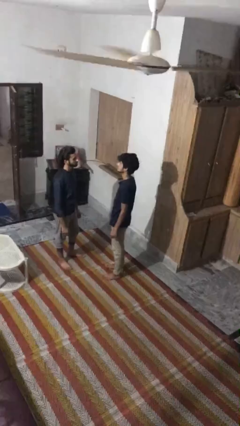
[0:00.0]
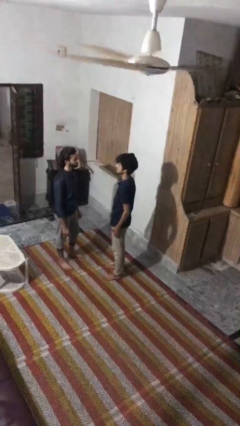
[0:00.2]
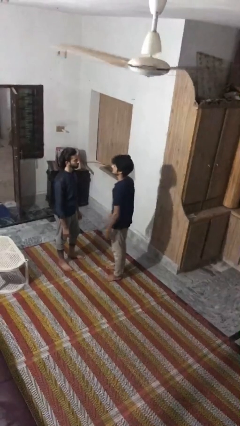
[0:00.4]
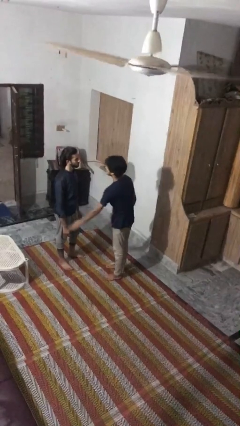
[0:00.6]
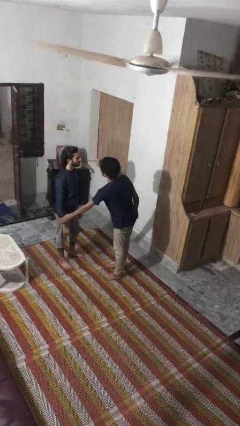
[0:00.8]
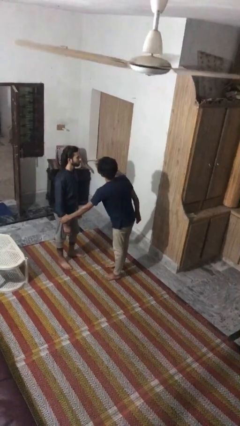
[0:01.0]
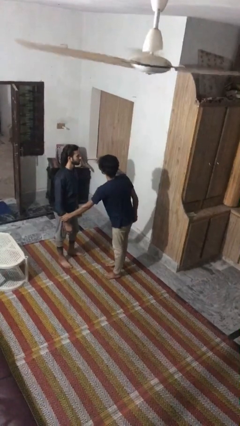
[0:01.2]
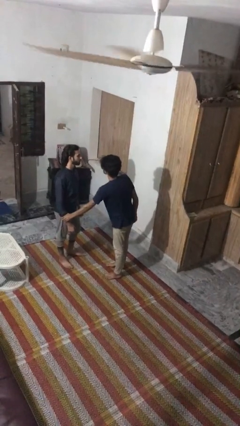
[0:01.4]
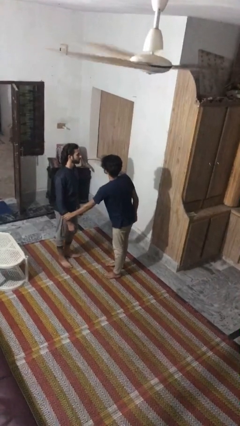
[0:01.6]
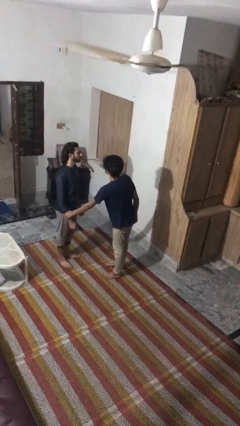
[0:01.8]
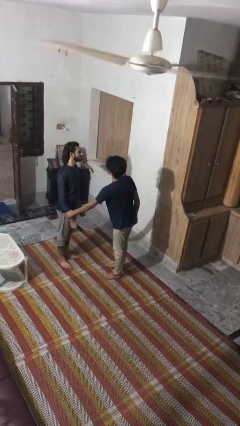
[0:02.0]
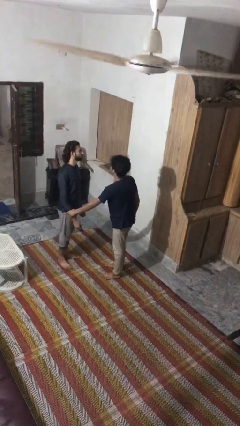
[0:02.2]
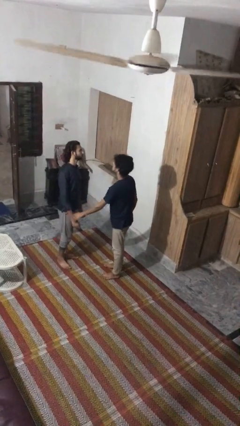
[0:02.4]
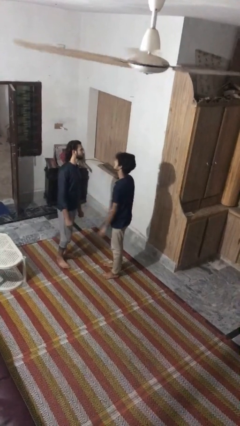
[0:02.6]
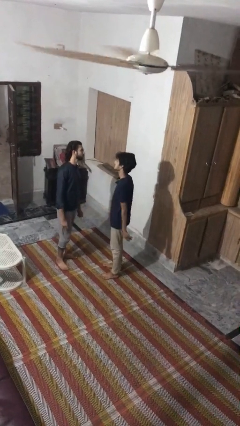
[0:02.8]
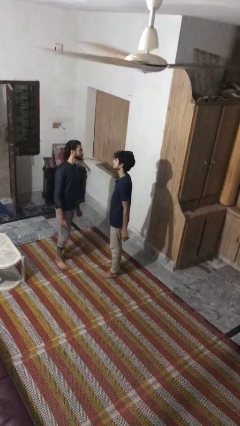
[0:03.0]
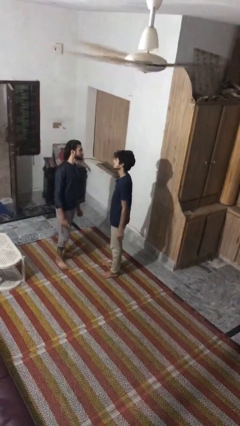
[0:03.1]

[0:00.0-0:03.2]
person grabs person by forearm

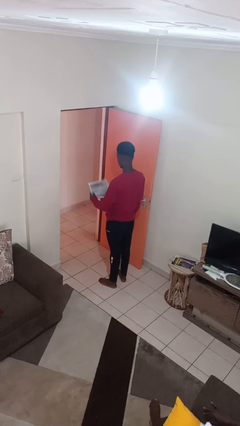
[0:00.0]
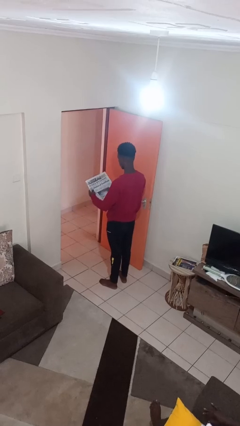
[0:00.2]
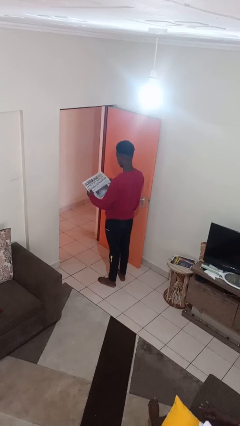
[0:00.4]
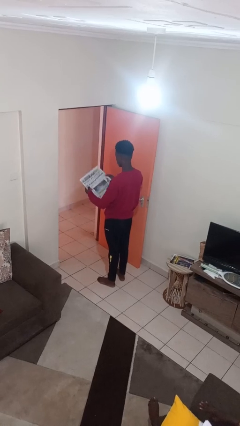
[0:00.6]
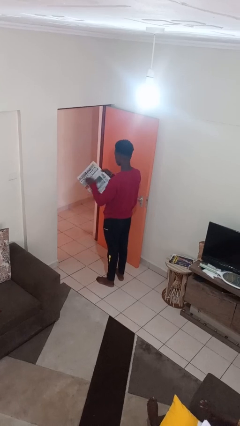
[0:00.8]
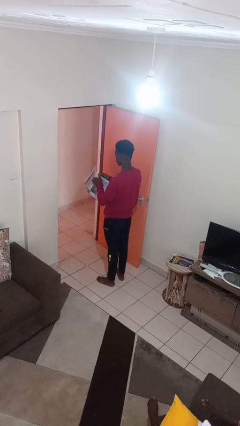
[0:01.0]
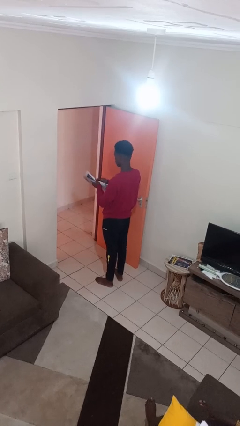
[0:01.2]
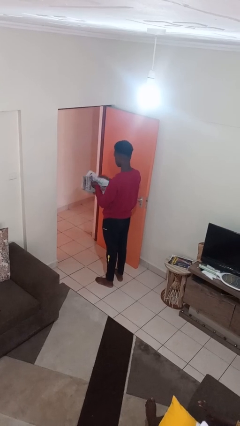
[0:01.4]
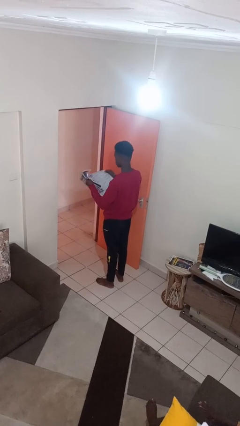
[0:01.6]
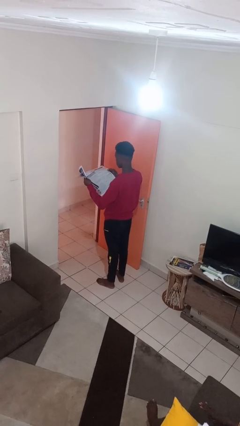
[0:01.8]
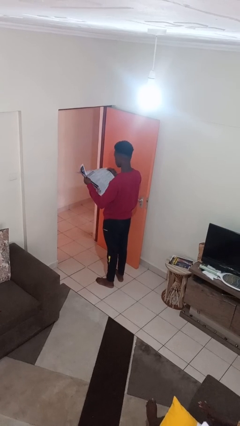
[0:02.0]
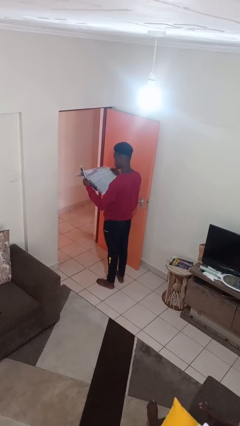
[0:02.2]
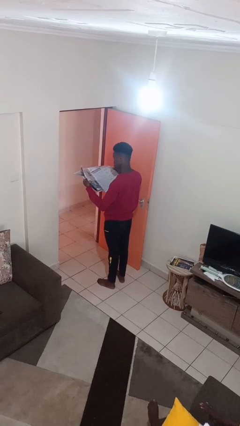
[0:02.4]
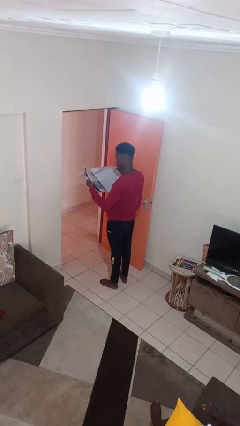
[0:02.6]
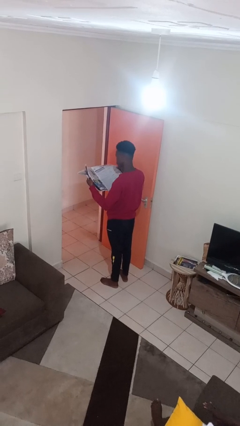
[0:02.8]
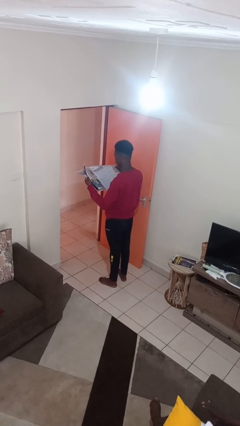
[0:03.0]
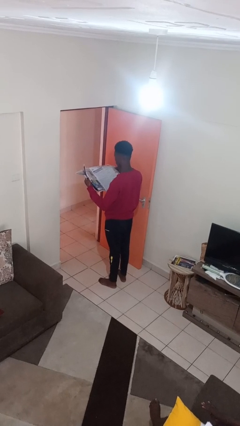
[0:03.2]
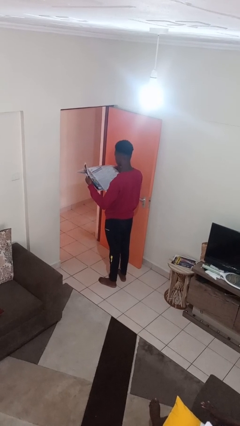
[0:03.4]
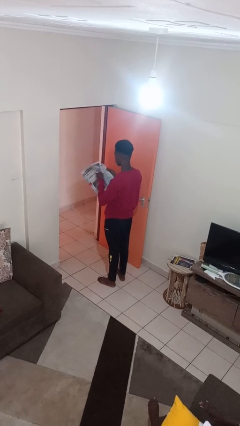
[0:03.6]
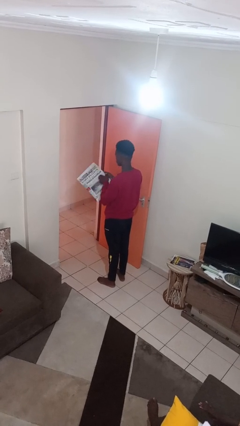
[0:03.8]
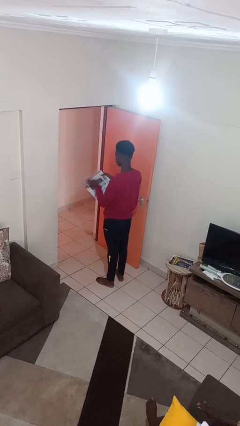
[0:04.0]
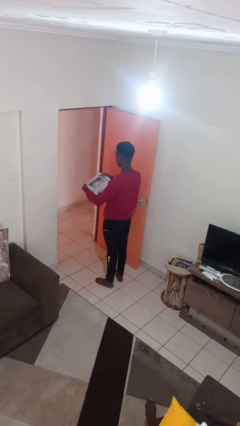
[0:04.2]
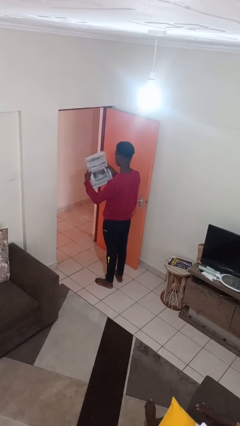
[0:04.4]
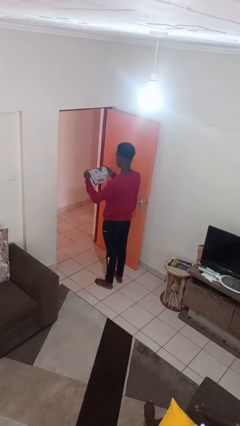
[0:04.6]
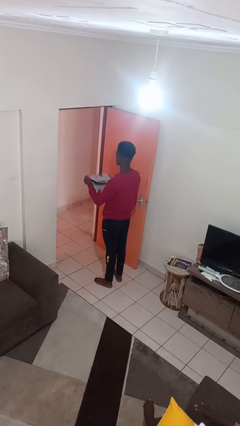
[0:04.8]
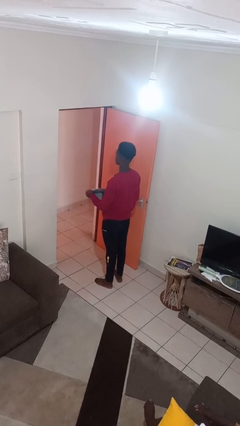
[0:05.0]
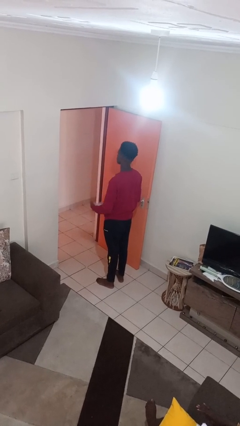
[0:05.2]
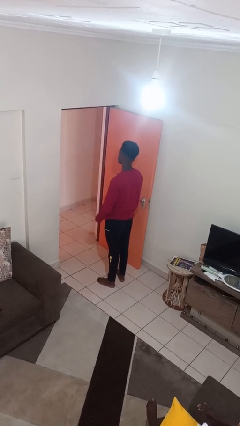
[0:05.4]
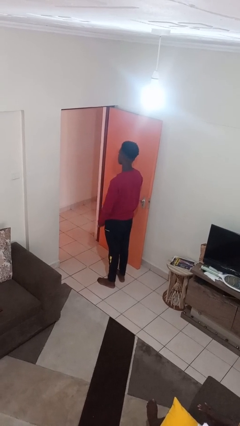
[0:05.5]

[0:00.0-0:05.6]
person reads newspaper

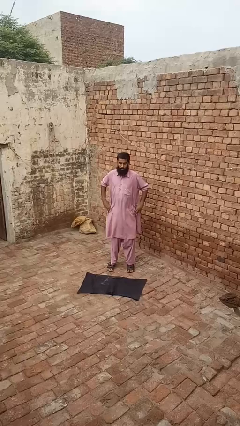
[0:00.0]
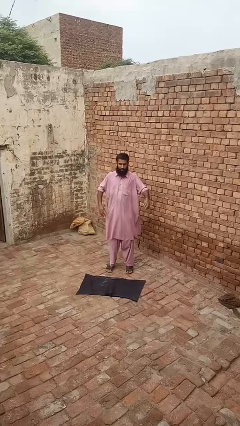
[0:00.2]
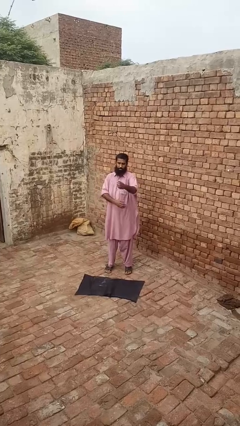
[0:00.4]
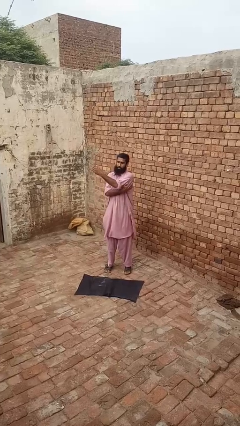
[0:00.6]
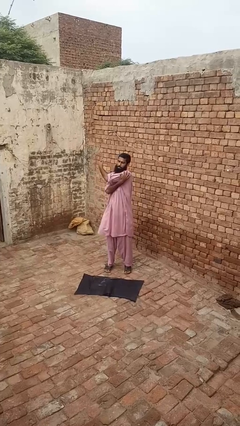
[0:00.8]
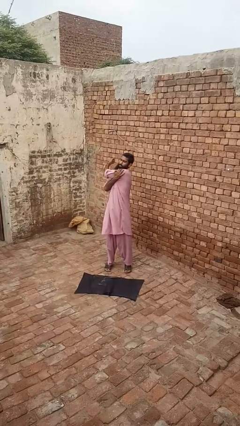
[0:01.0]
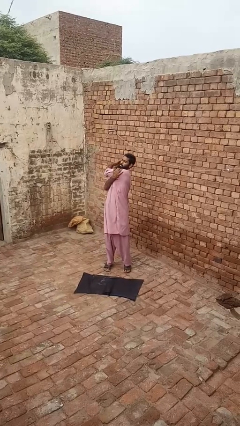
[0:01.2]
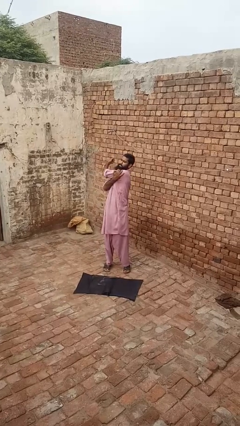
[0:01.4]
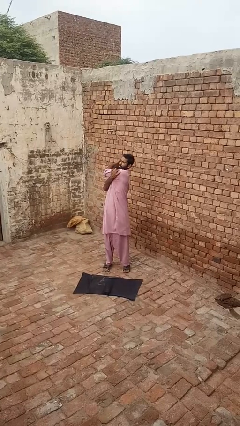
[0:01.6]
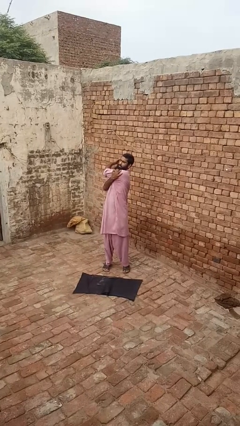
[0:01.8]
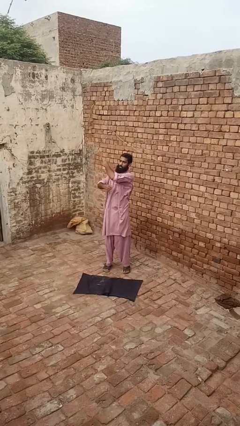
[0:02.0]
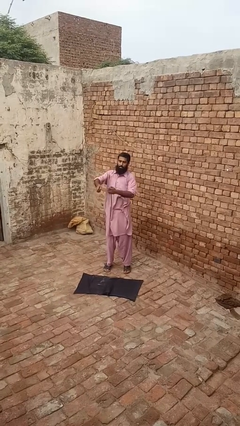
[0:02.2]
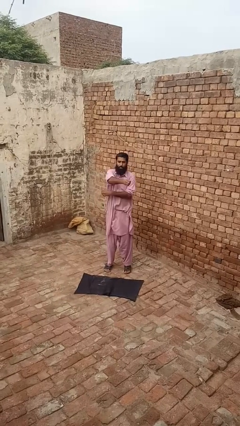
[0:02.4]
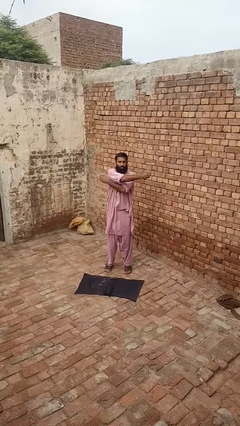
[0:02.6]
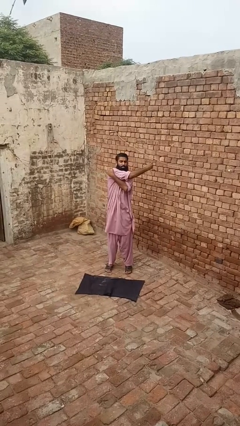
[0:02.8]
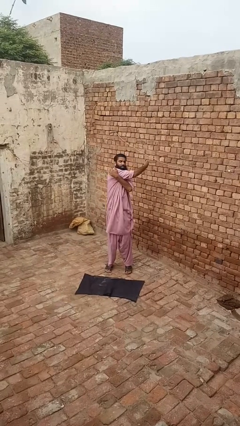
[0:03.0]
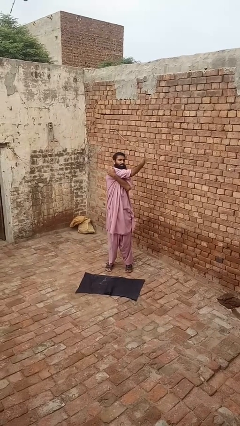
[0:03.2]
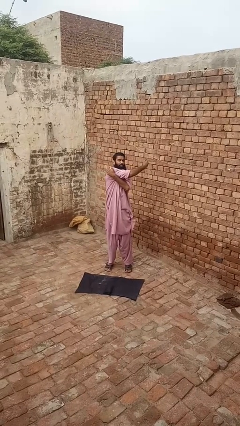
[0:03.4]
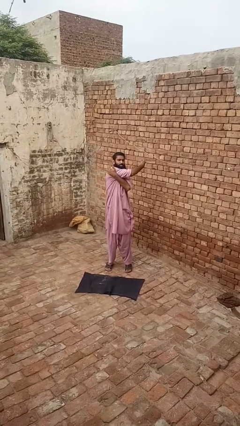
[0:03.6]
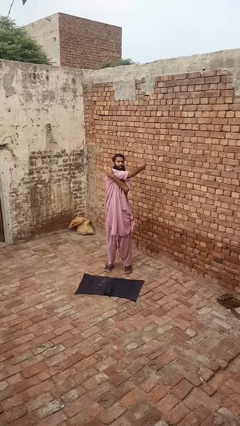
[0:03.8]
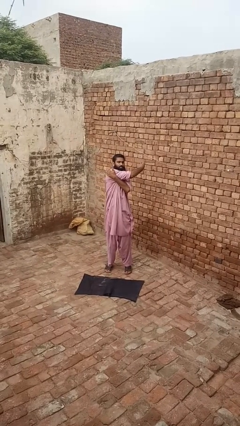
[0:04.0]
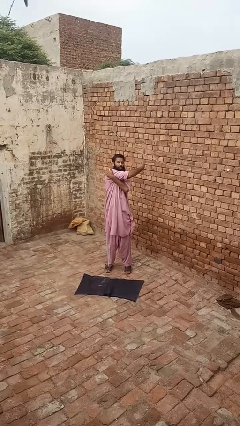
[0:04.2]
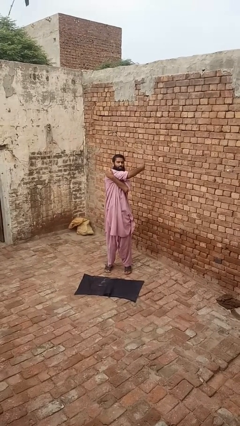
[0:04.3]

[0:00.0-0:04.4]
person stretches arms to side

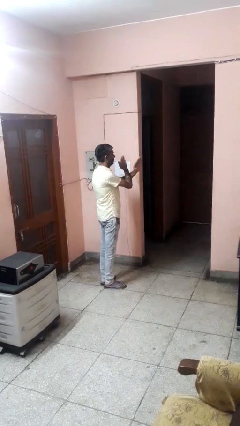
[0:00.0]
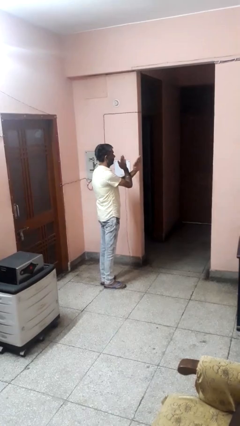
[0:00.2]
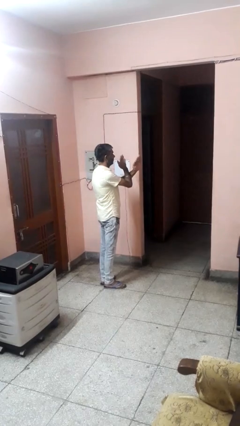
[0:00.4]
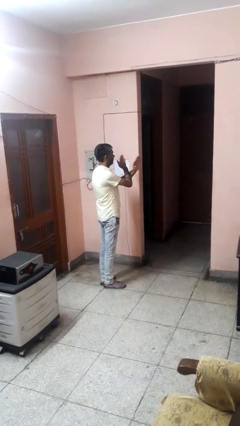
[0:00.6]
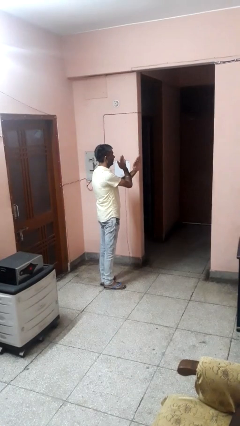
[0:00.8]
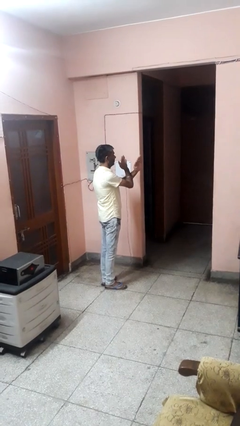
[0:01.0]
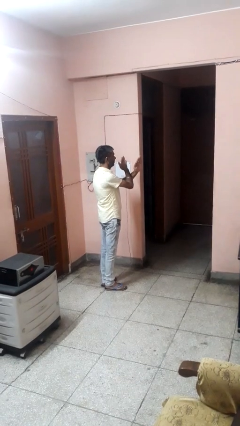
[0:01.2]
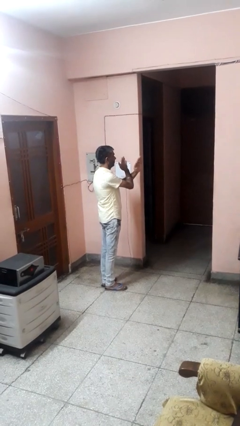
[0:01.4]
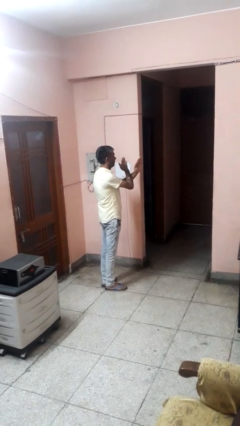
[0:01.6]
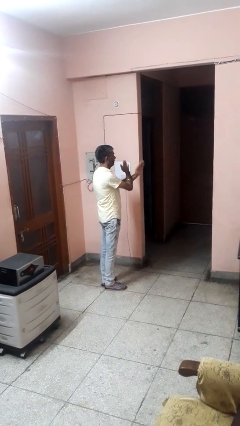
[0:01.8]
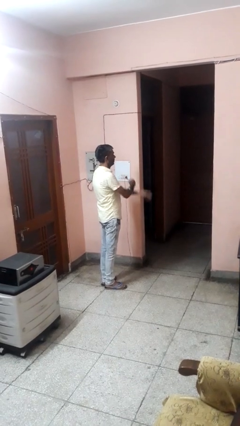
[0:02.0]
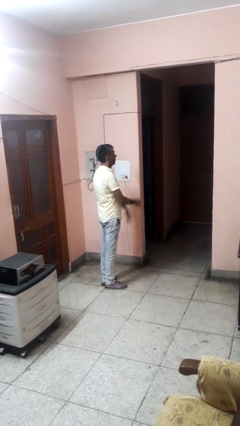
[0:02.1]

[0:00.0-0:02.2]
person gestures arms x

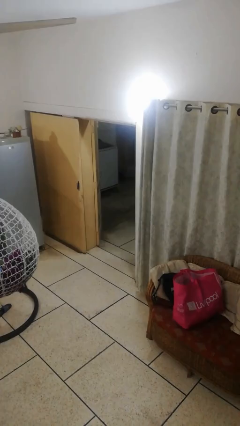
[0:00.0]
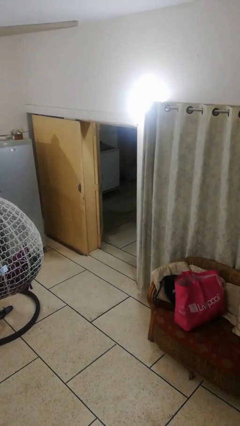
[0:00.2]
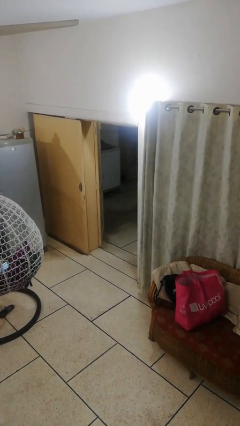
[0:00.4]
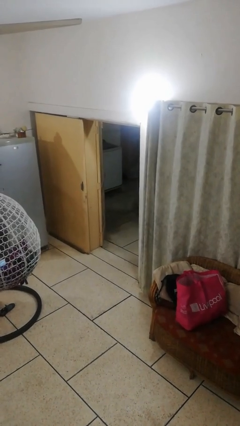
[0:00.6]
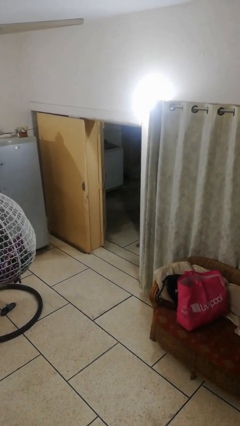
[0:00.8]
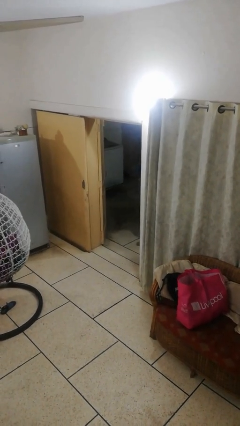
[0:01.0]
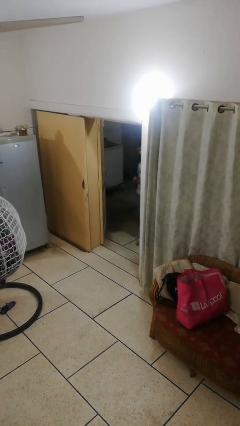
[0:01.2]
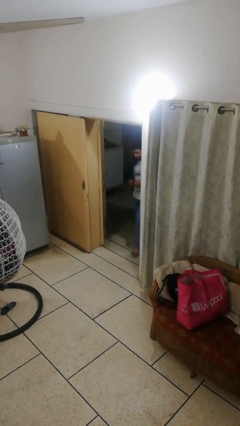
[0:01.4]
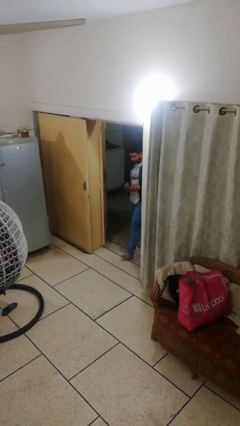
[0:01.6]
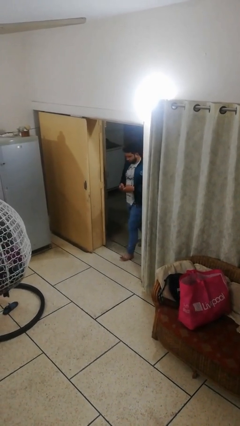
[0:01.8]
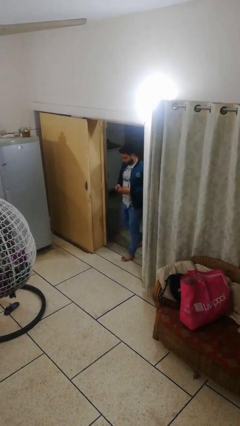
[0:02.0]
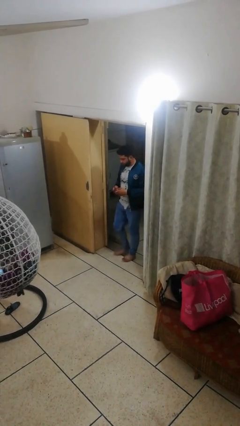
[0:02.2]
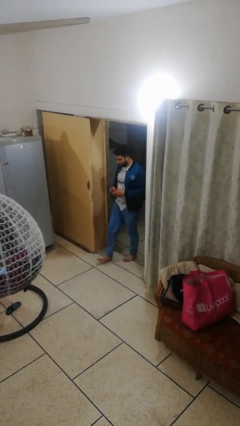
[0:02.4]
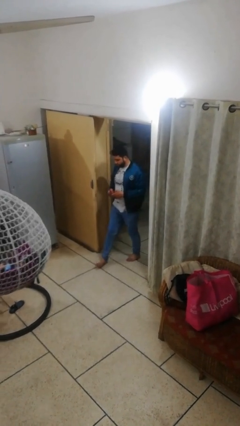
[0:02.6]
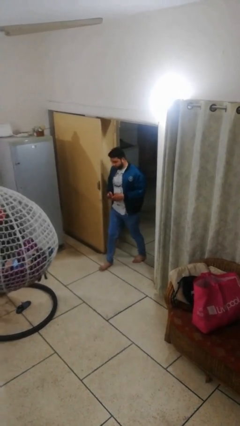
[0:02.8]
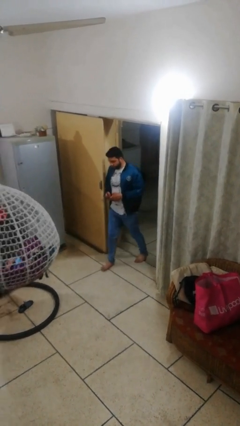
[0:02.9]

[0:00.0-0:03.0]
person enters scene through structure
